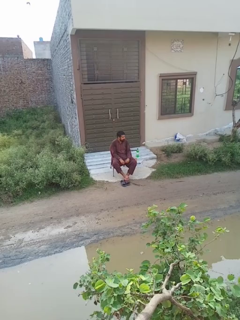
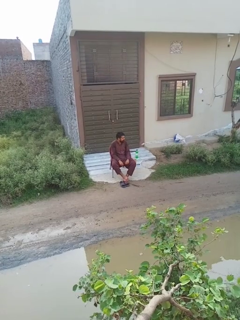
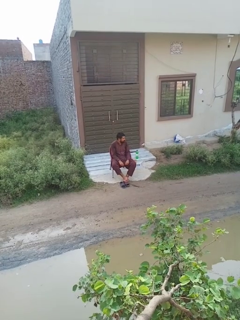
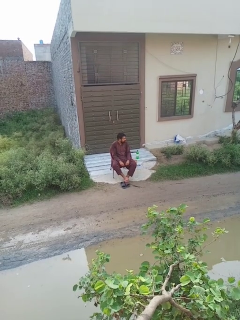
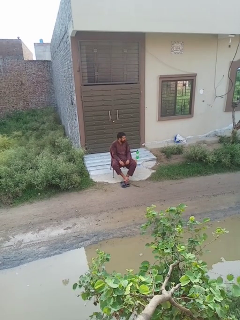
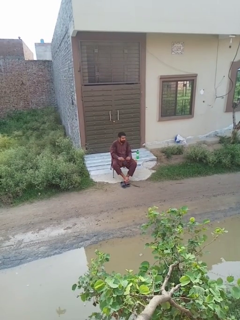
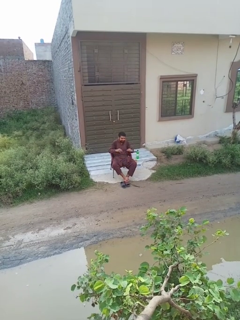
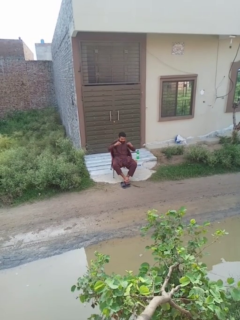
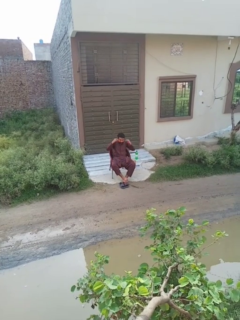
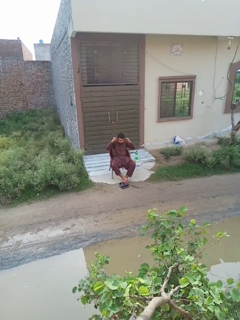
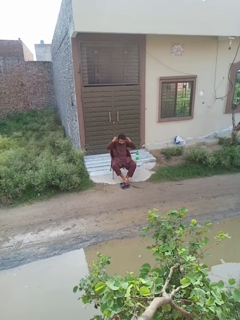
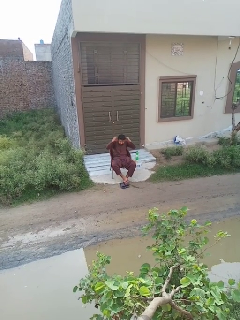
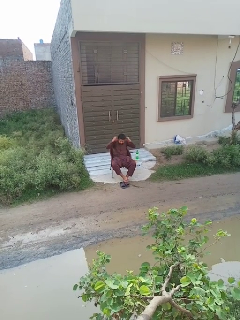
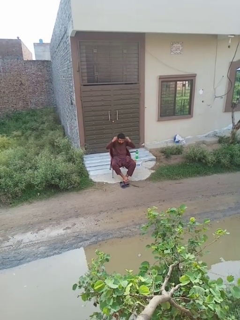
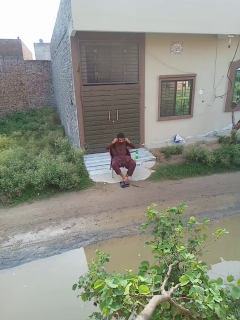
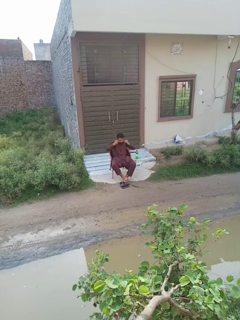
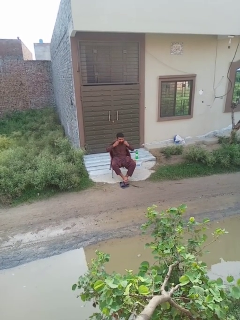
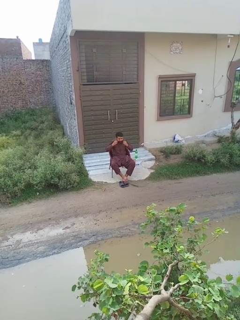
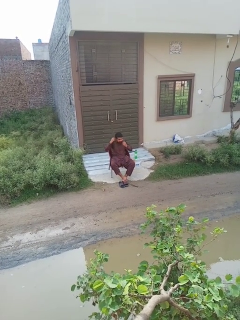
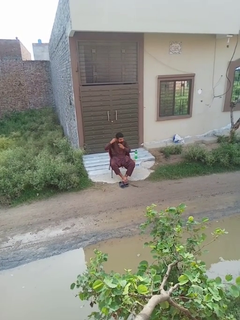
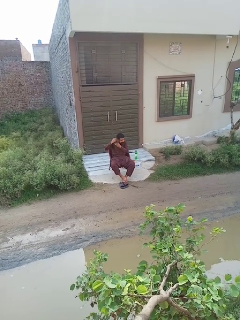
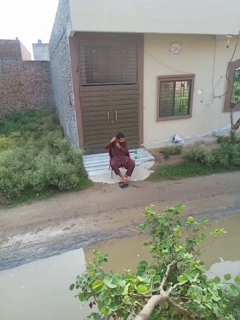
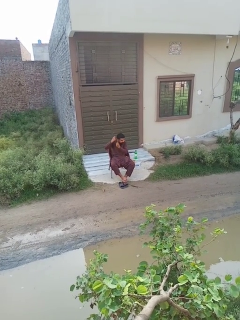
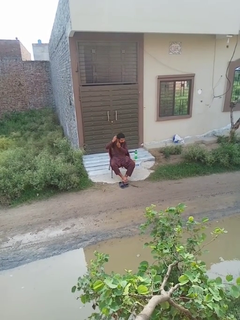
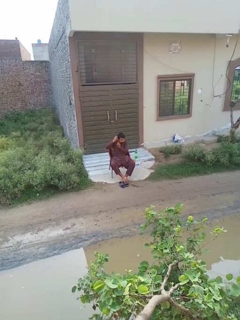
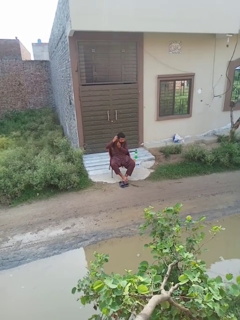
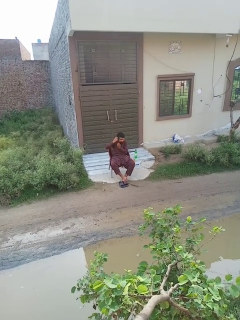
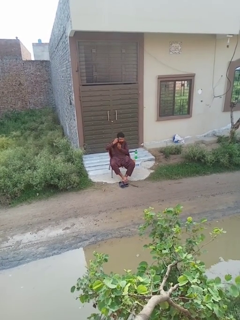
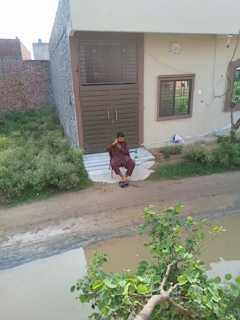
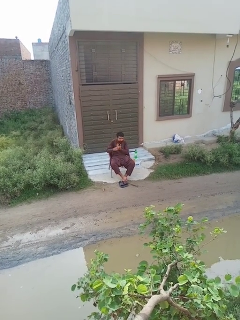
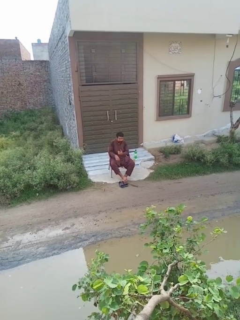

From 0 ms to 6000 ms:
person puts on earrings

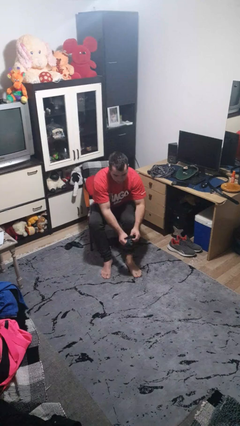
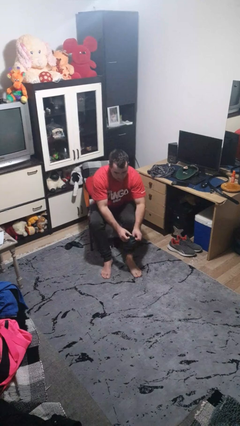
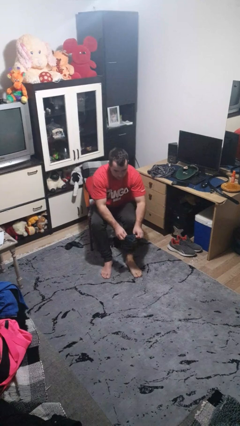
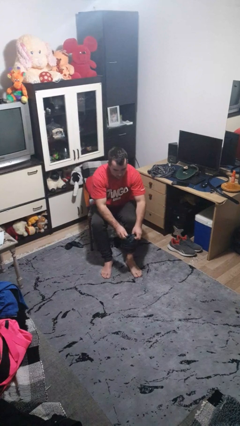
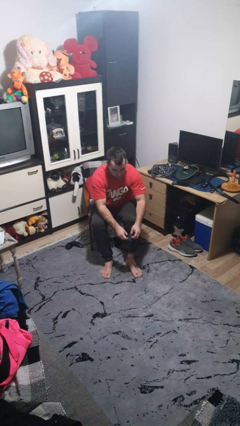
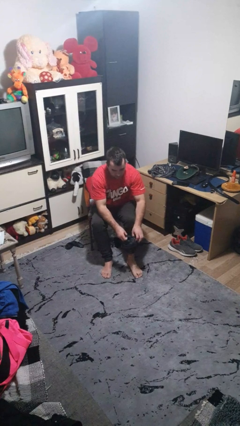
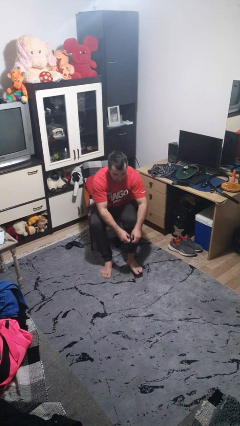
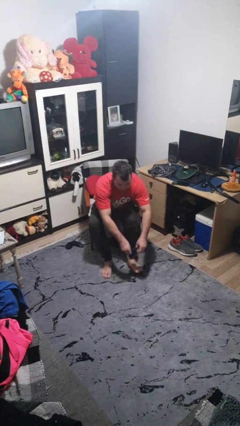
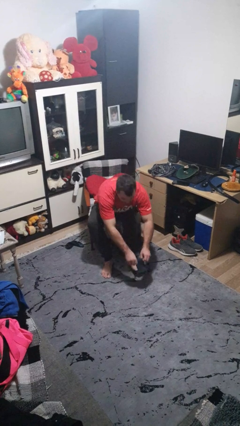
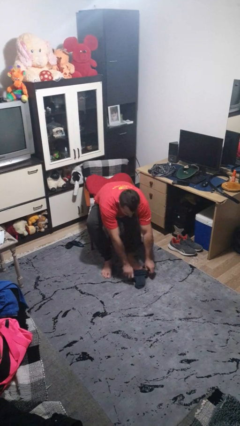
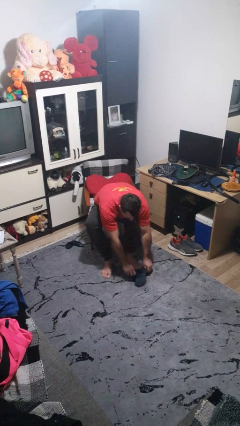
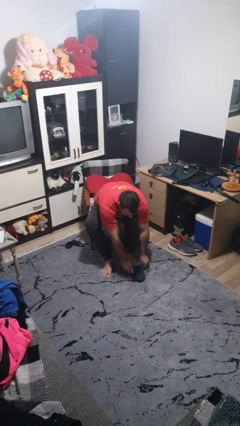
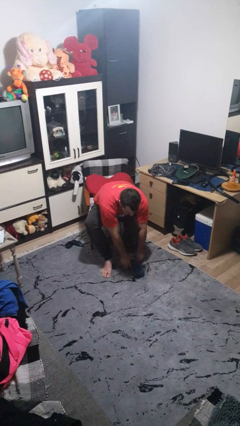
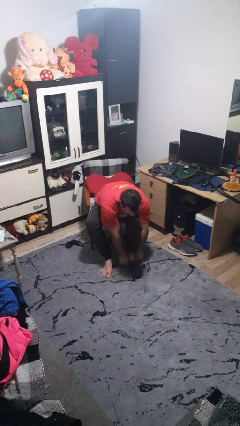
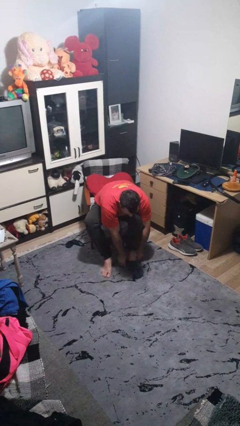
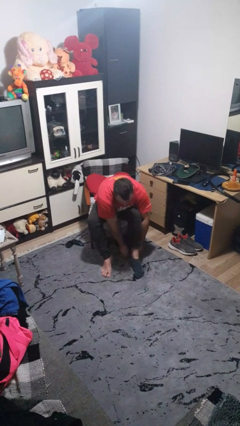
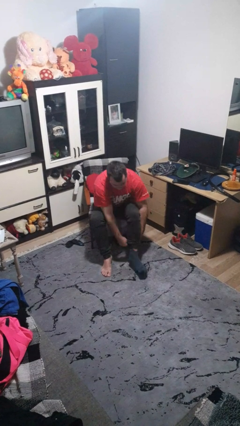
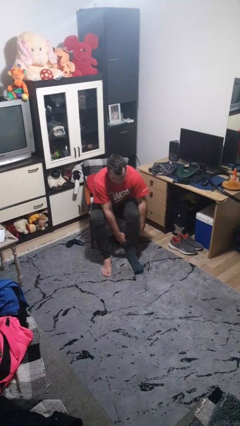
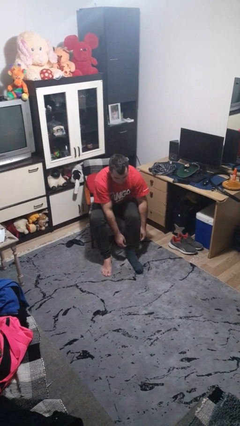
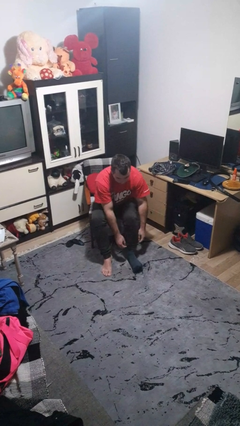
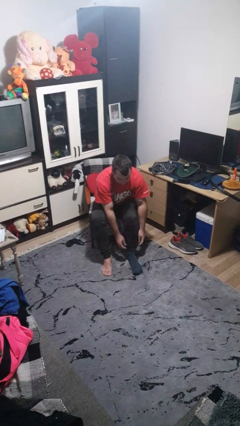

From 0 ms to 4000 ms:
person puts on socks

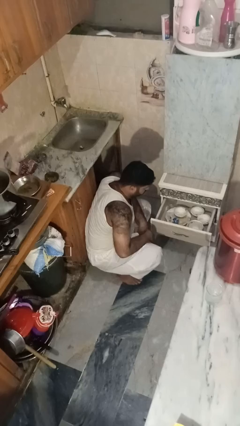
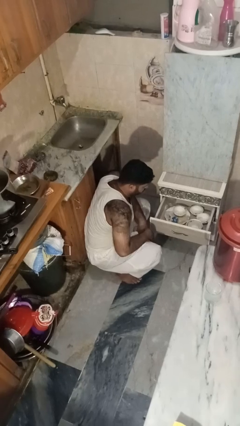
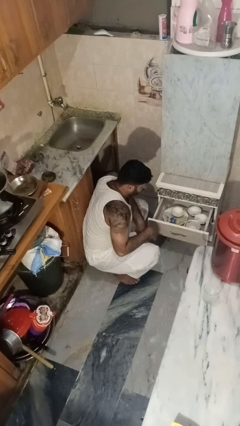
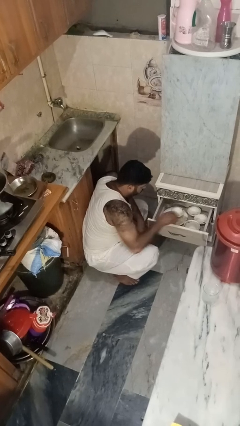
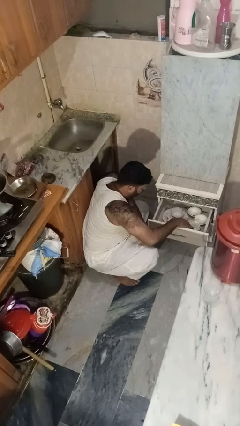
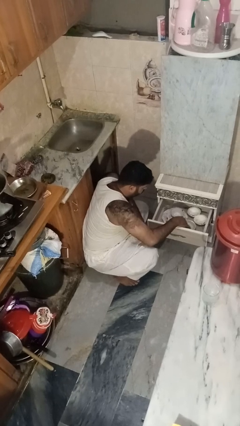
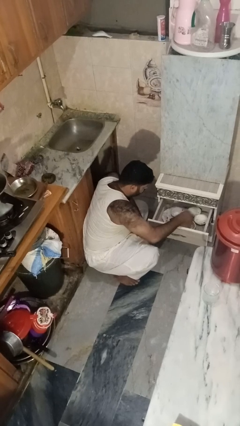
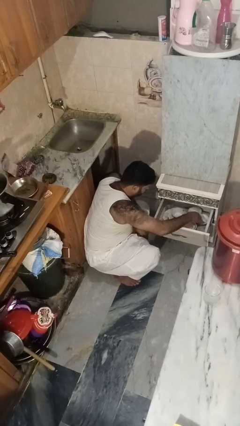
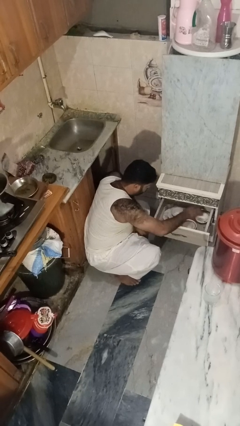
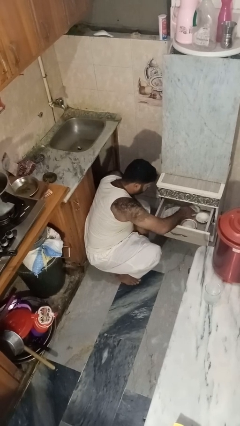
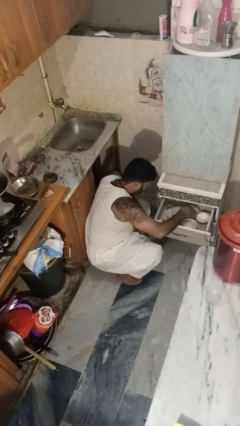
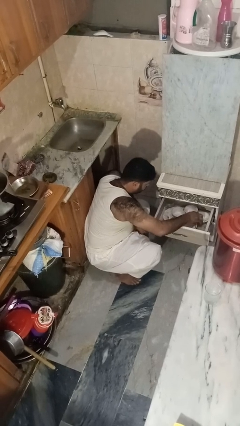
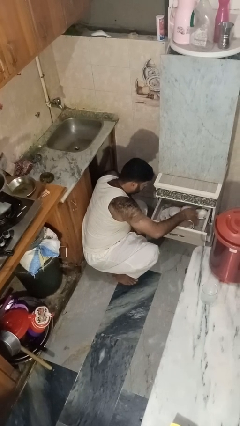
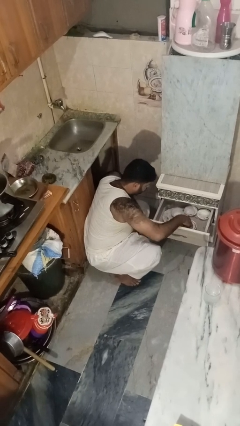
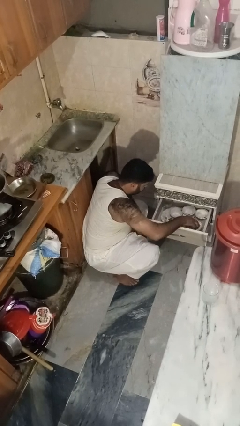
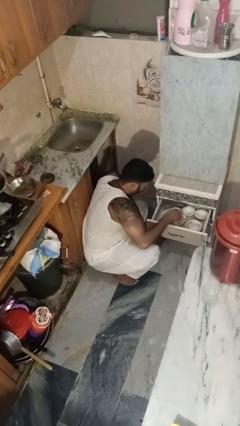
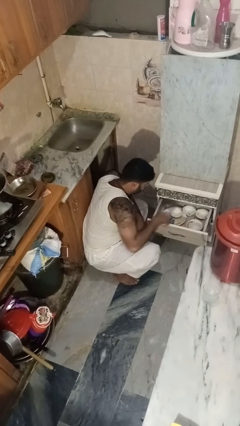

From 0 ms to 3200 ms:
person searches in kitchen drawer

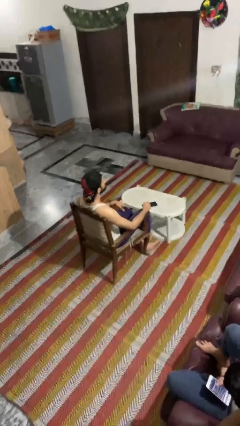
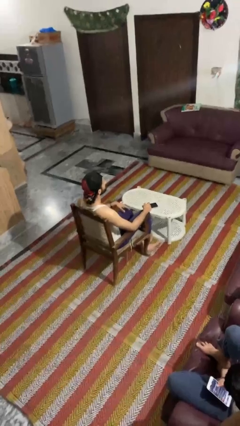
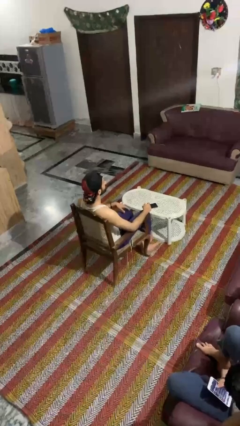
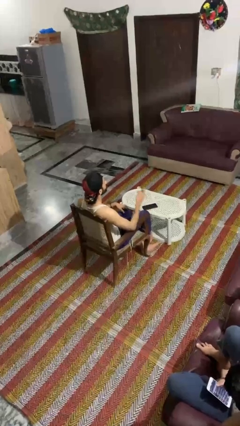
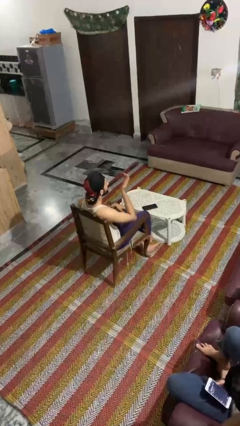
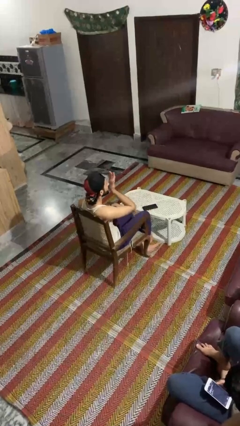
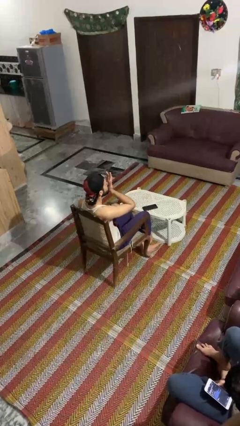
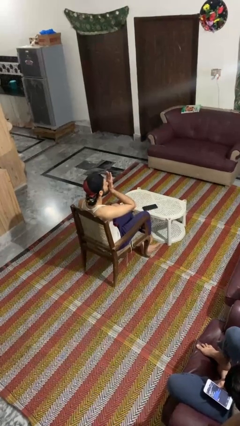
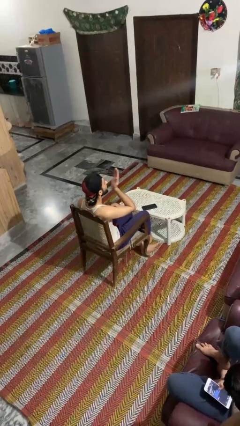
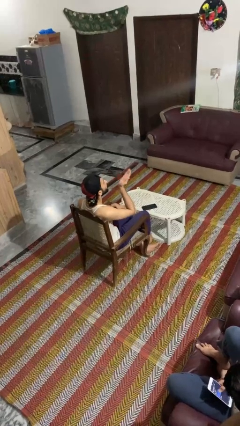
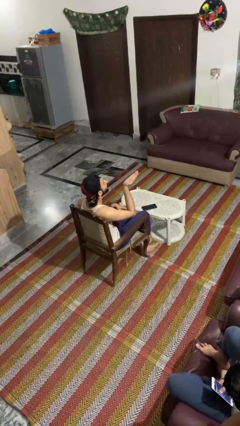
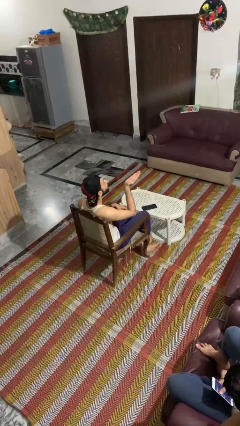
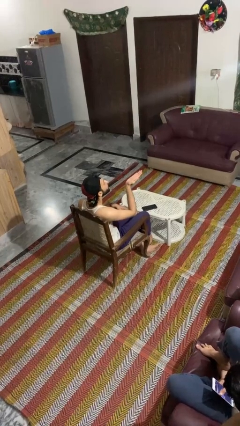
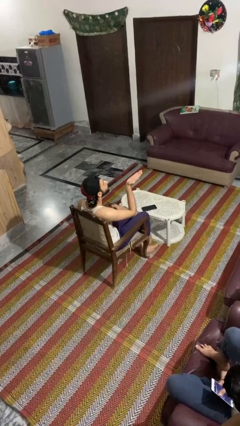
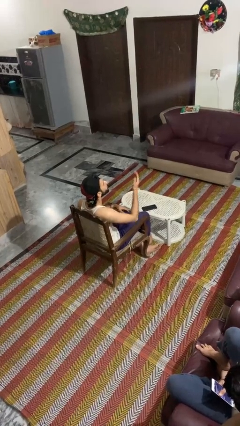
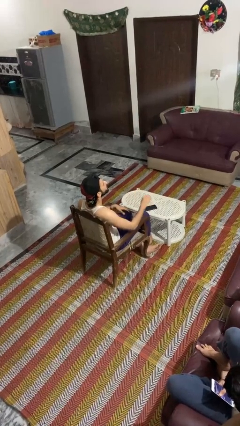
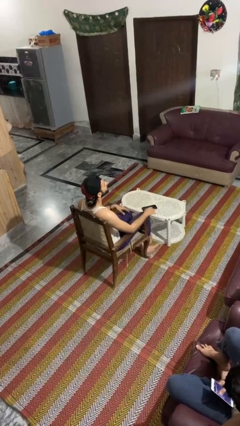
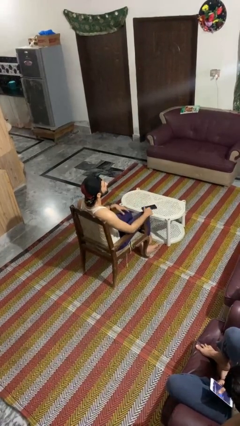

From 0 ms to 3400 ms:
person gestures blow kiss

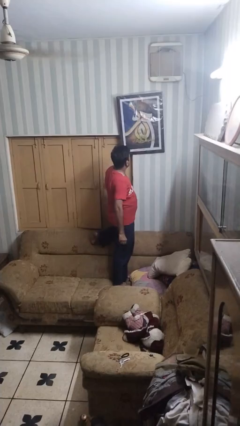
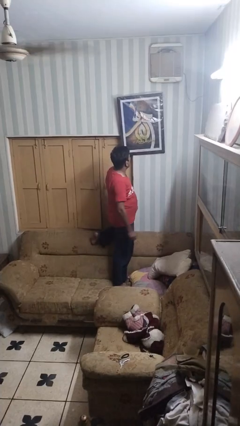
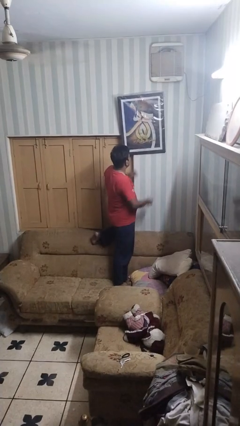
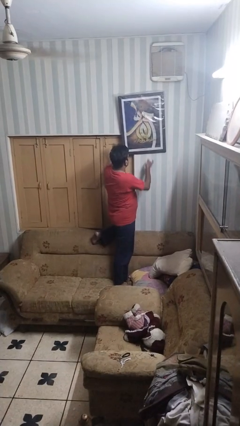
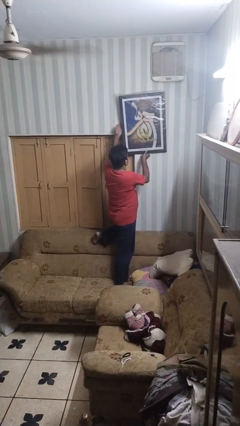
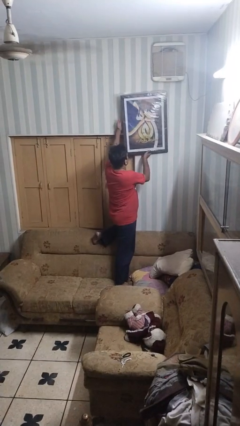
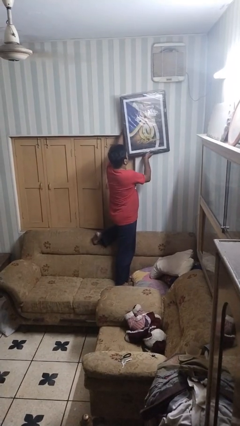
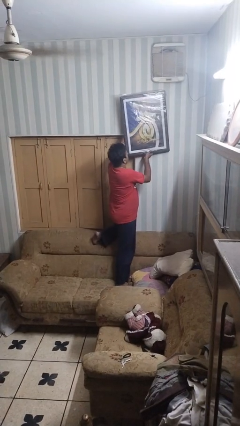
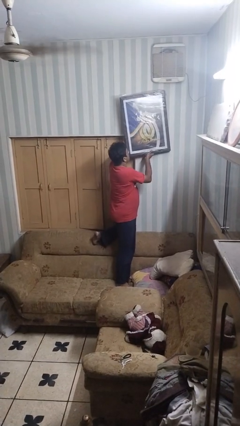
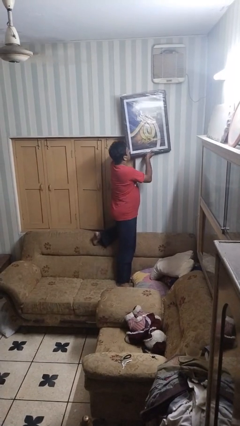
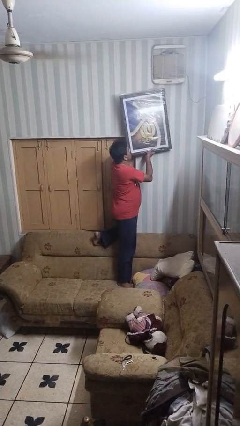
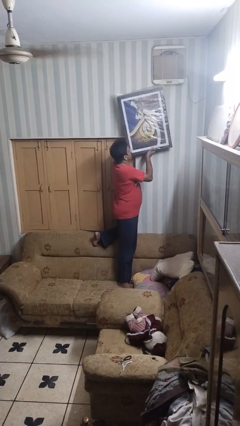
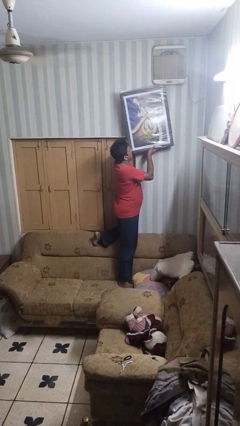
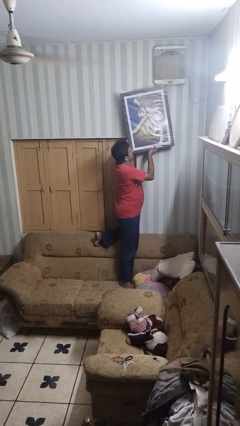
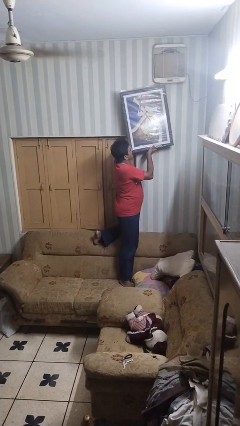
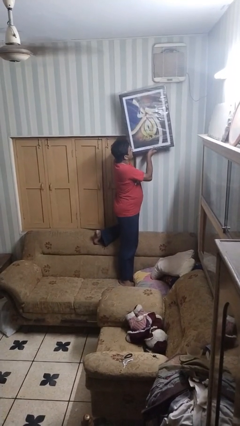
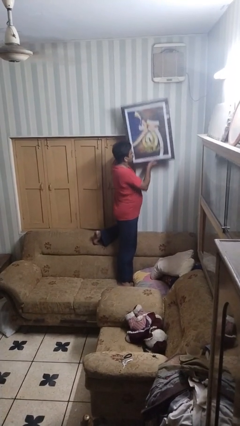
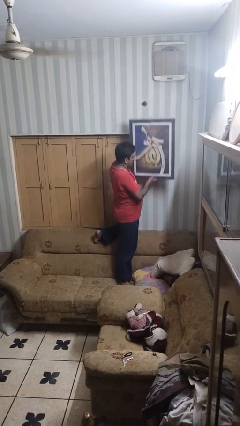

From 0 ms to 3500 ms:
person takes down picture frame
